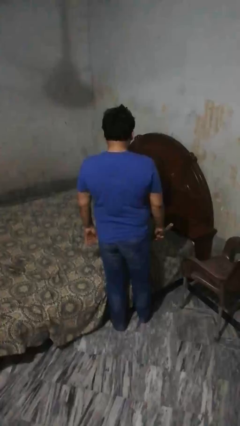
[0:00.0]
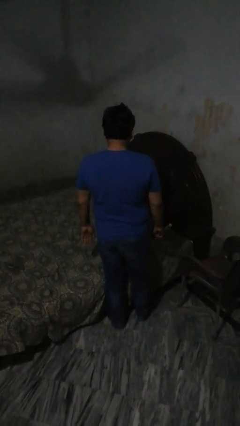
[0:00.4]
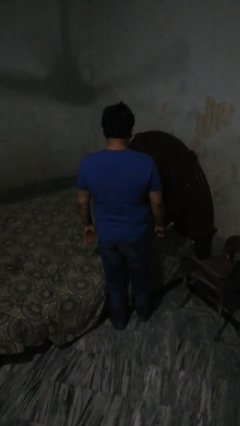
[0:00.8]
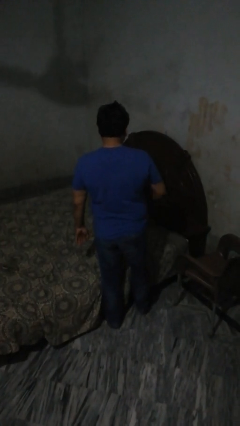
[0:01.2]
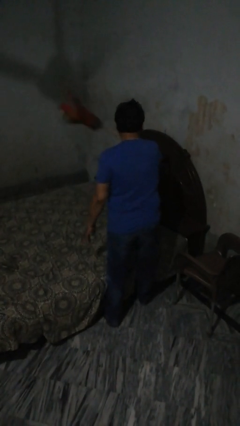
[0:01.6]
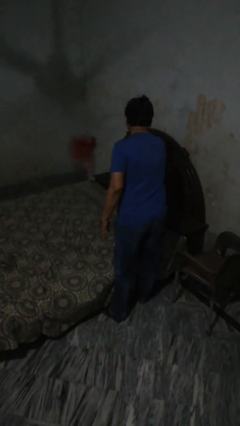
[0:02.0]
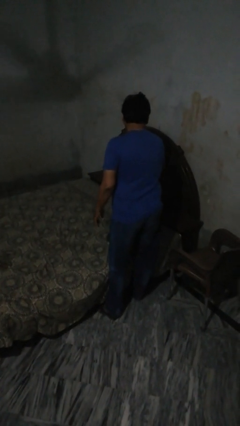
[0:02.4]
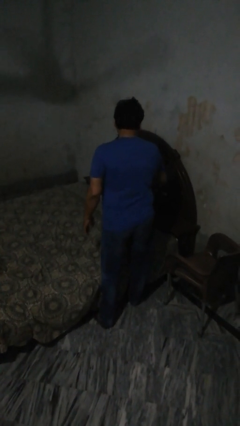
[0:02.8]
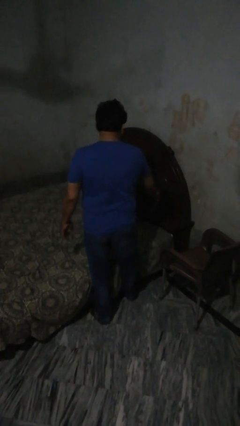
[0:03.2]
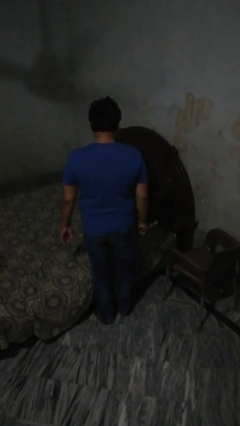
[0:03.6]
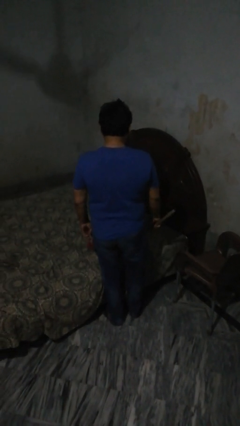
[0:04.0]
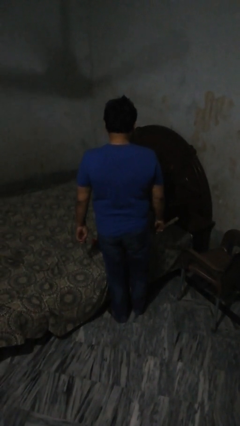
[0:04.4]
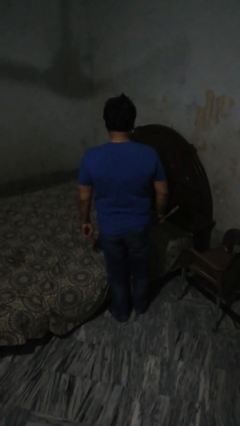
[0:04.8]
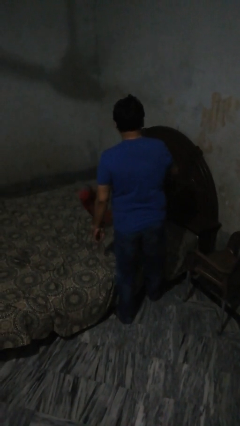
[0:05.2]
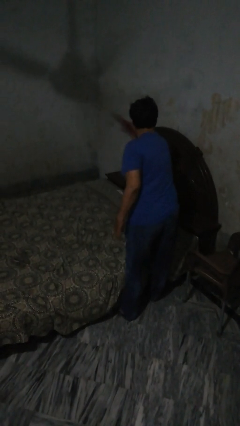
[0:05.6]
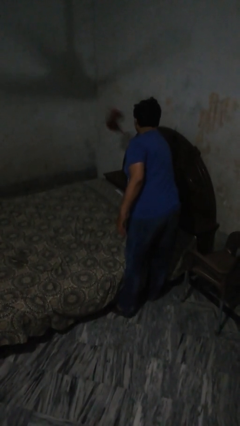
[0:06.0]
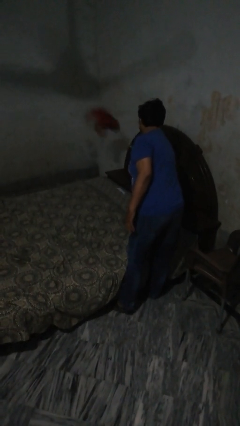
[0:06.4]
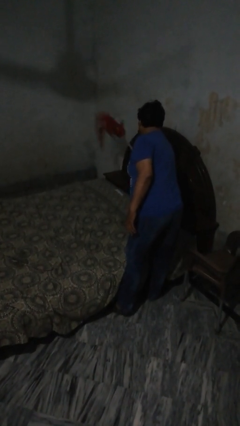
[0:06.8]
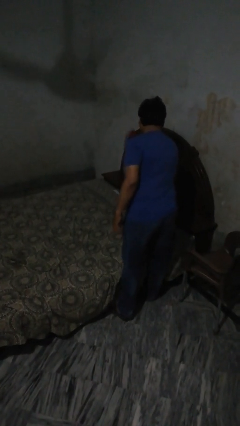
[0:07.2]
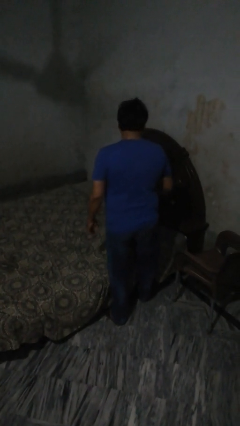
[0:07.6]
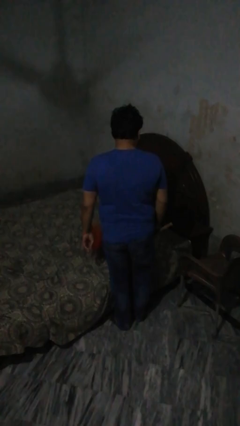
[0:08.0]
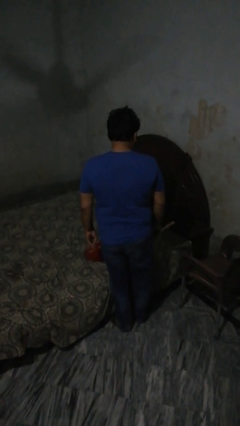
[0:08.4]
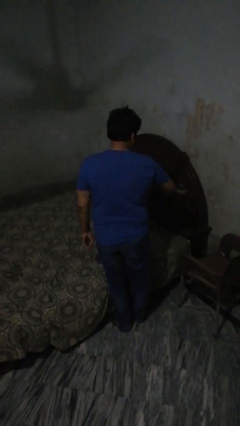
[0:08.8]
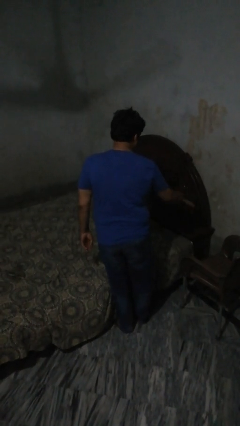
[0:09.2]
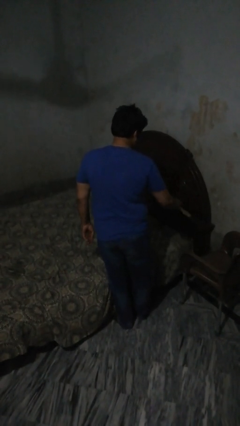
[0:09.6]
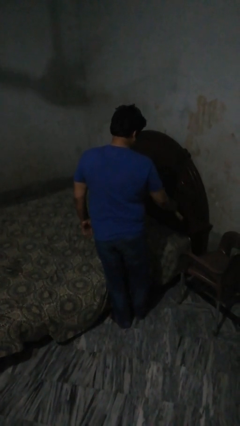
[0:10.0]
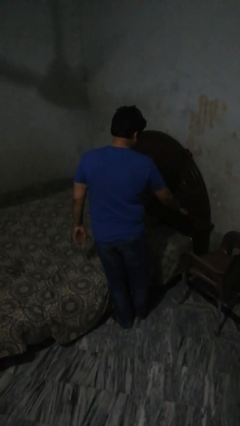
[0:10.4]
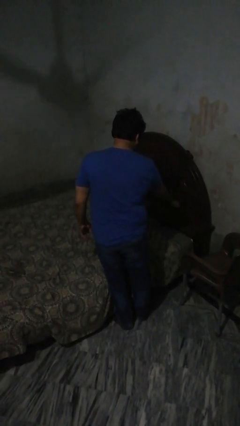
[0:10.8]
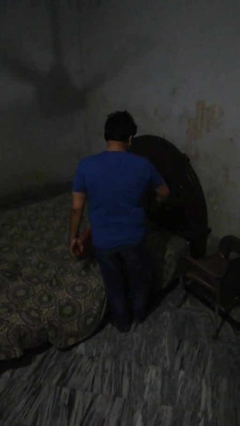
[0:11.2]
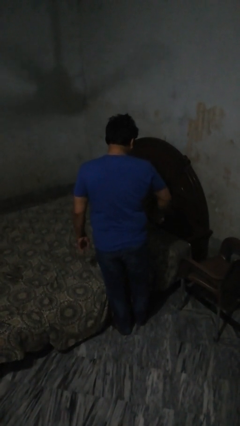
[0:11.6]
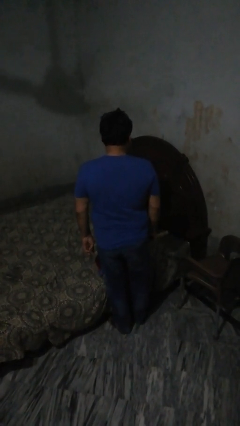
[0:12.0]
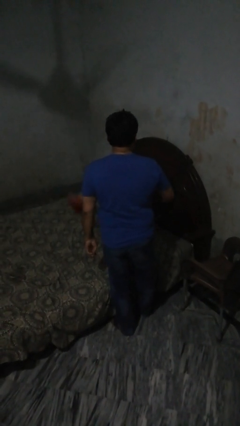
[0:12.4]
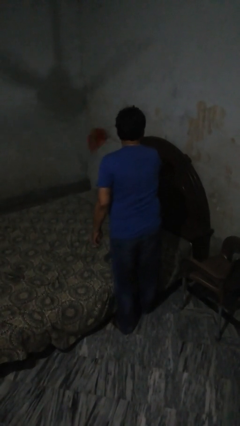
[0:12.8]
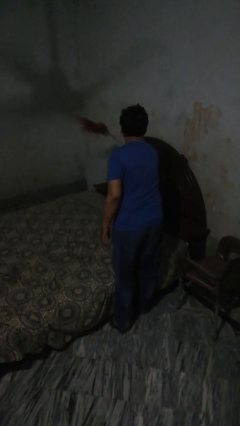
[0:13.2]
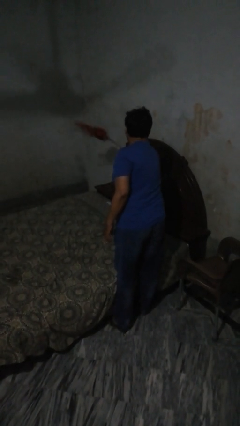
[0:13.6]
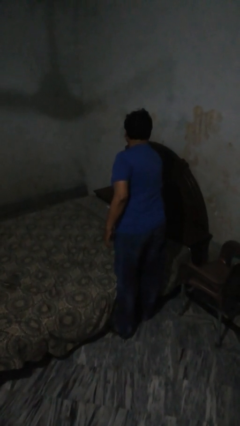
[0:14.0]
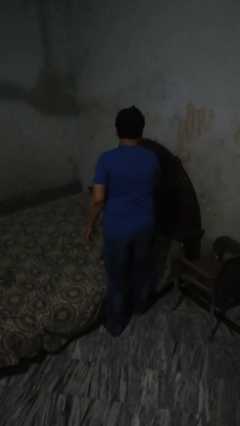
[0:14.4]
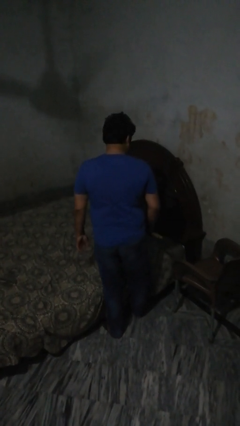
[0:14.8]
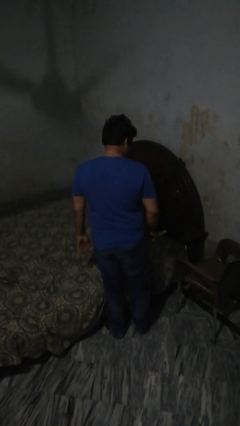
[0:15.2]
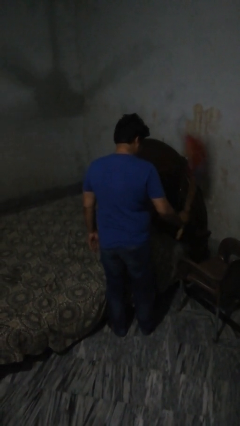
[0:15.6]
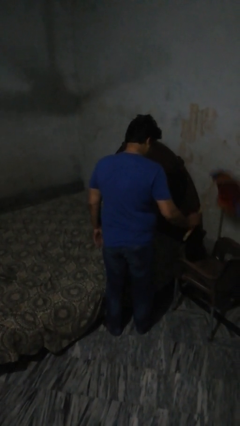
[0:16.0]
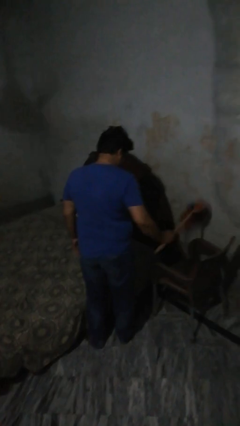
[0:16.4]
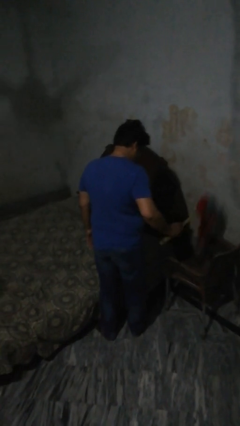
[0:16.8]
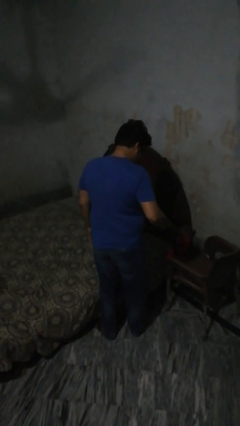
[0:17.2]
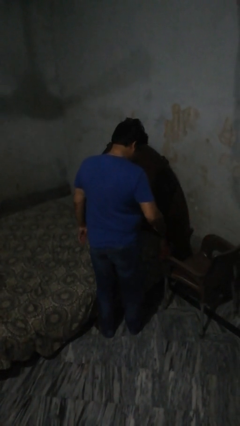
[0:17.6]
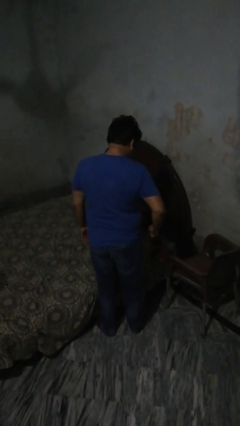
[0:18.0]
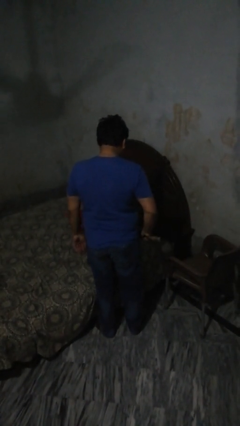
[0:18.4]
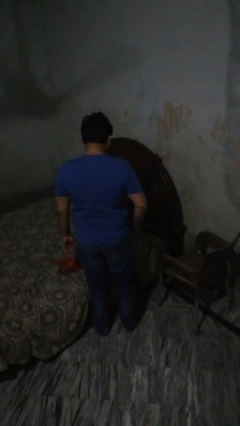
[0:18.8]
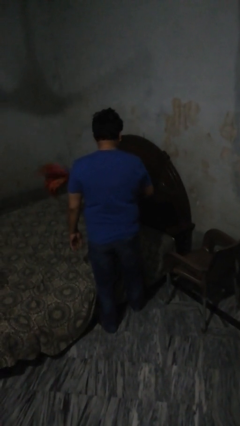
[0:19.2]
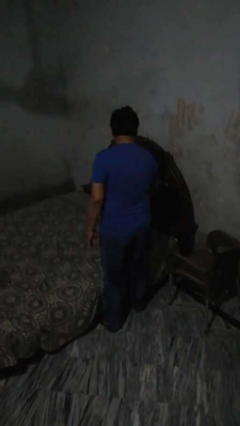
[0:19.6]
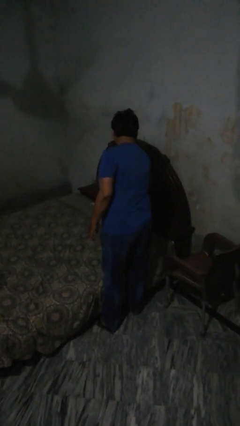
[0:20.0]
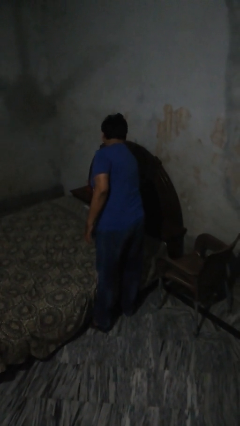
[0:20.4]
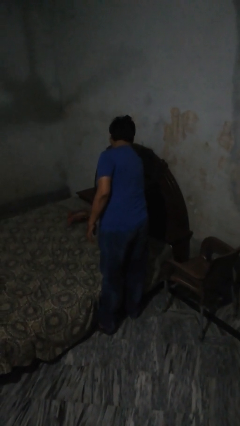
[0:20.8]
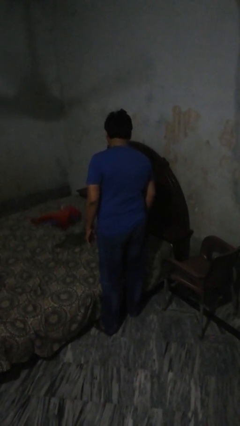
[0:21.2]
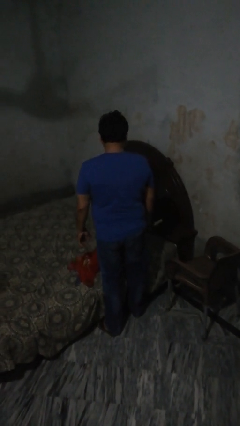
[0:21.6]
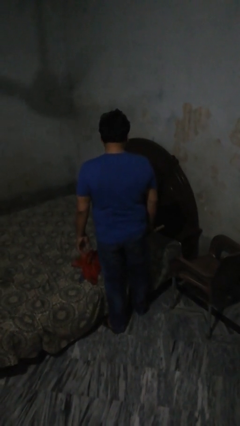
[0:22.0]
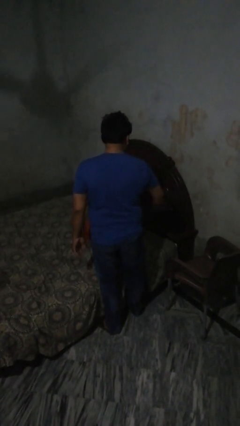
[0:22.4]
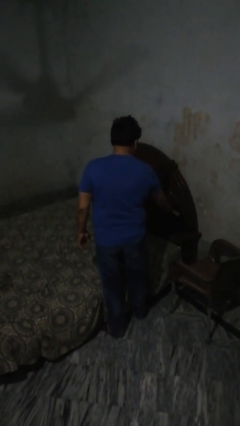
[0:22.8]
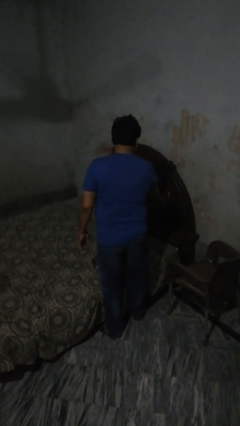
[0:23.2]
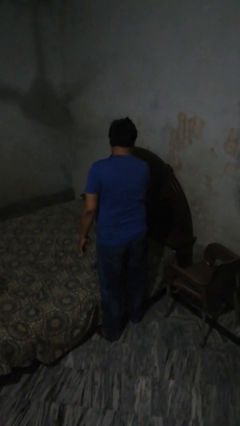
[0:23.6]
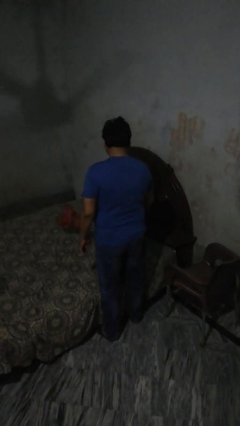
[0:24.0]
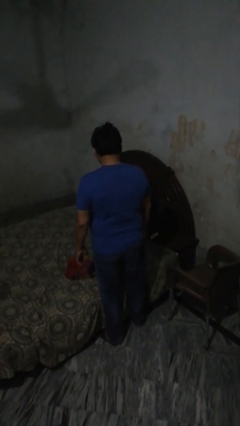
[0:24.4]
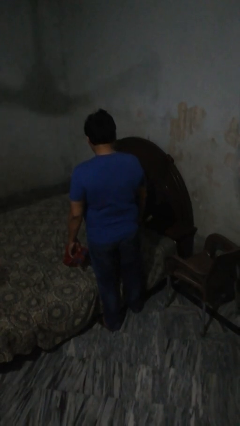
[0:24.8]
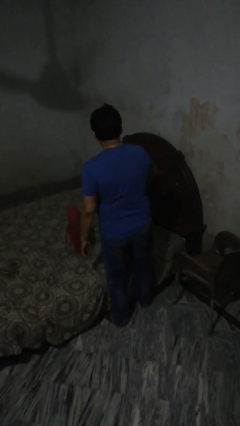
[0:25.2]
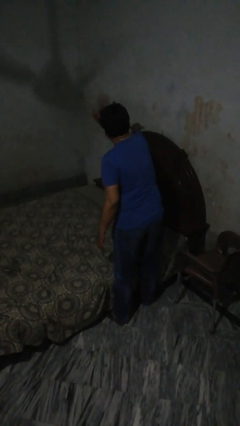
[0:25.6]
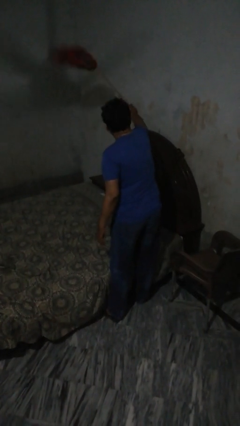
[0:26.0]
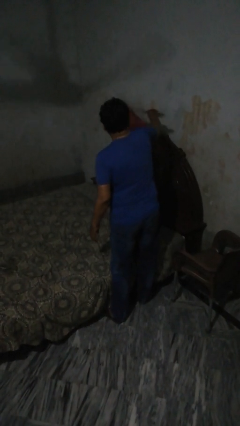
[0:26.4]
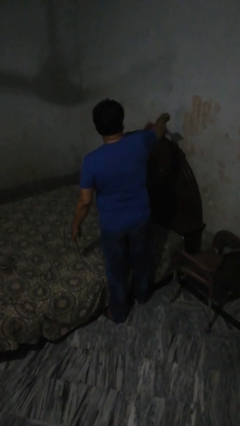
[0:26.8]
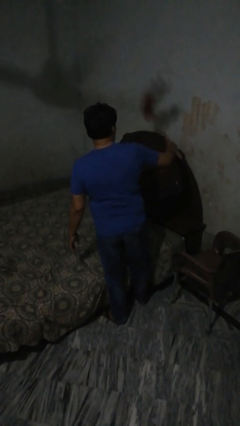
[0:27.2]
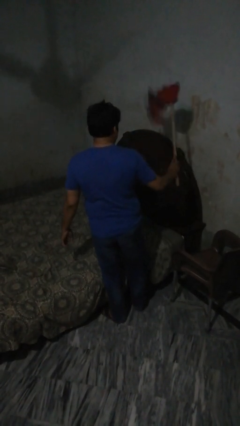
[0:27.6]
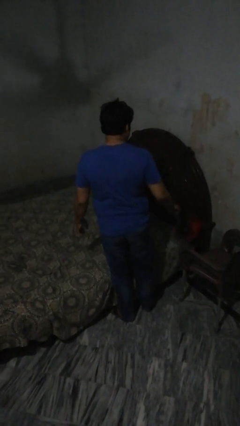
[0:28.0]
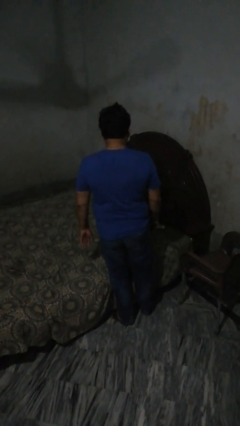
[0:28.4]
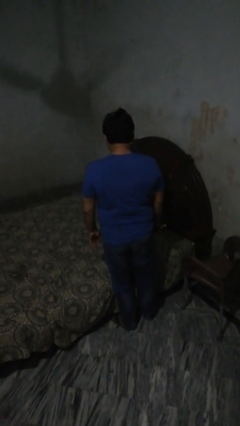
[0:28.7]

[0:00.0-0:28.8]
person dusts furniture

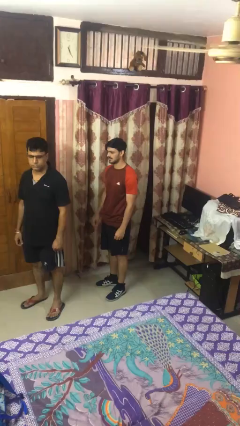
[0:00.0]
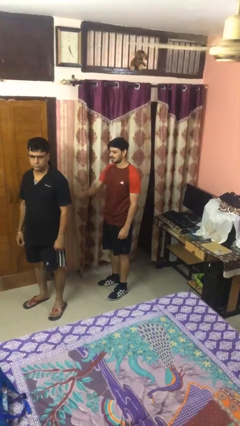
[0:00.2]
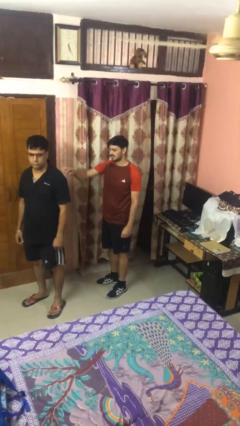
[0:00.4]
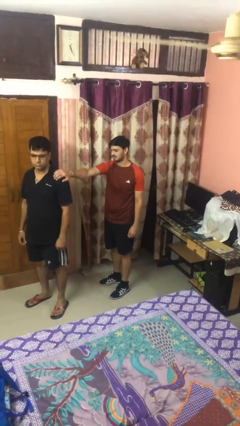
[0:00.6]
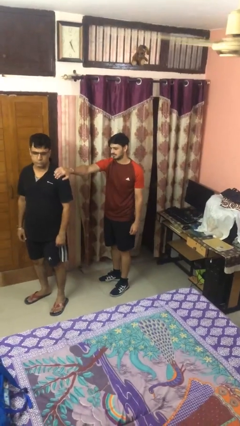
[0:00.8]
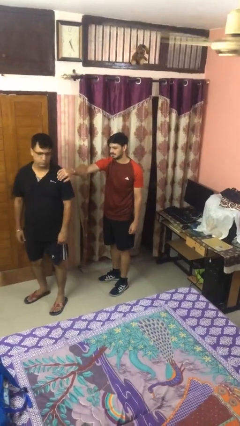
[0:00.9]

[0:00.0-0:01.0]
person grabs person by shoulder

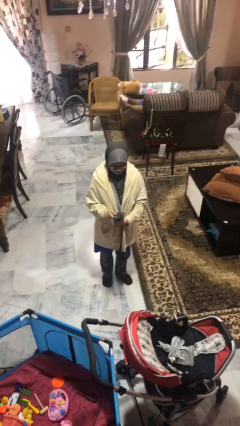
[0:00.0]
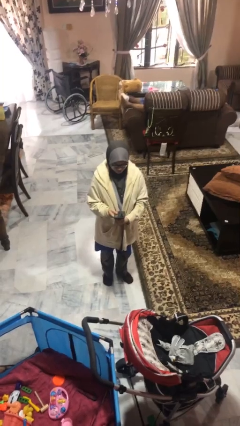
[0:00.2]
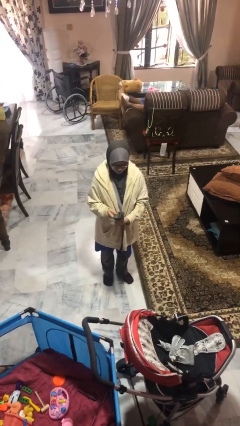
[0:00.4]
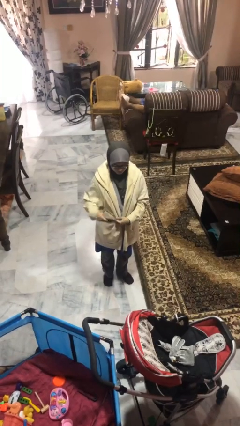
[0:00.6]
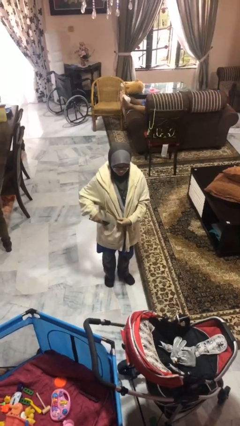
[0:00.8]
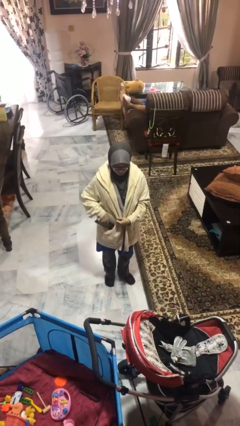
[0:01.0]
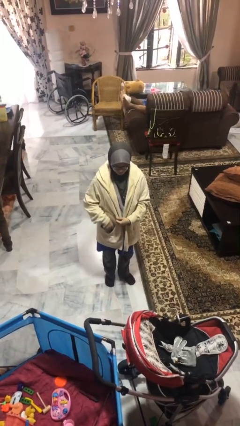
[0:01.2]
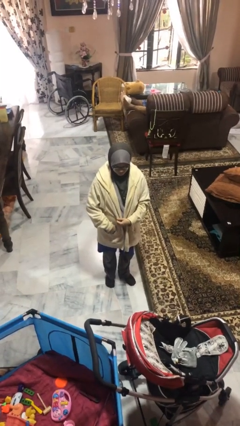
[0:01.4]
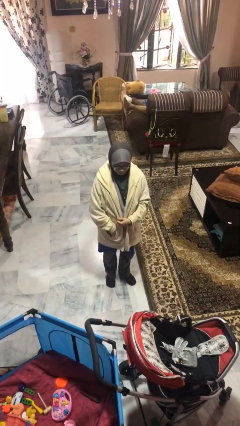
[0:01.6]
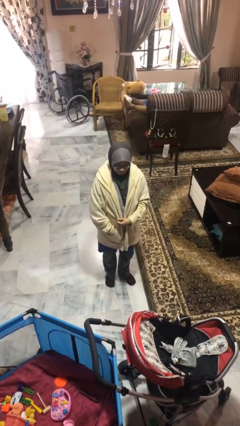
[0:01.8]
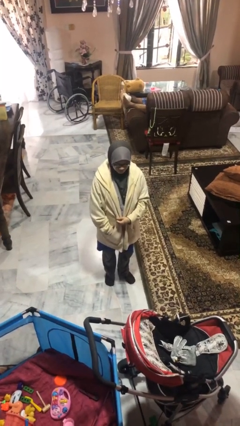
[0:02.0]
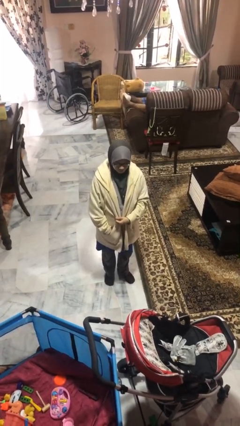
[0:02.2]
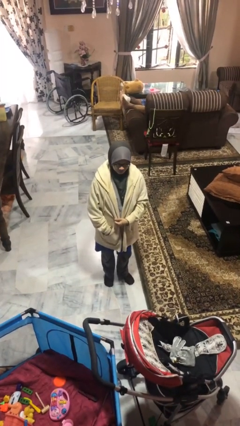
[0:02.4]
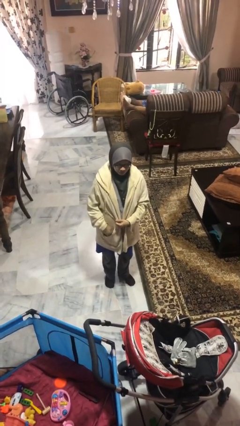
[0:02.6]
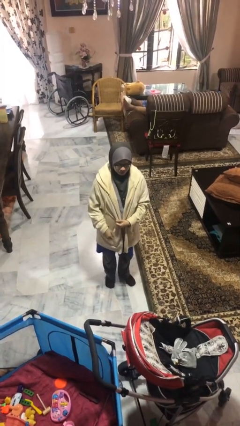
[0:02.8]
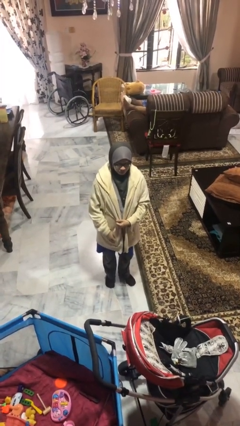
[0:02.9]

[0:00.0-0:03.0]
person puts phone into pocket
